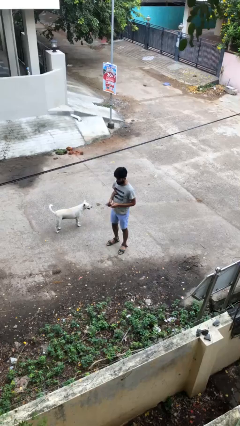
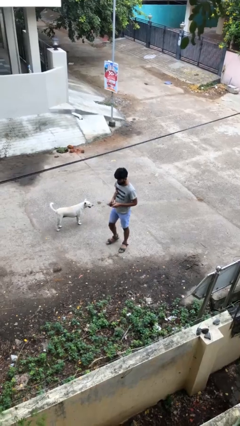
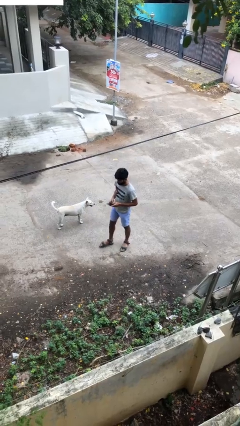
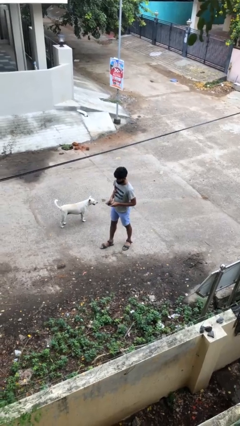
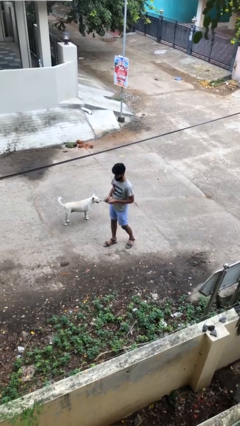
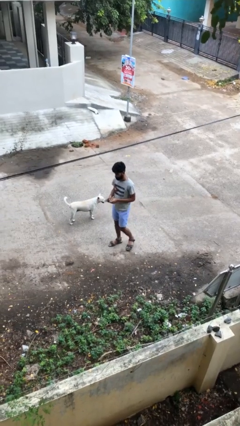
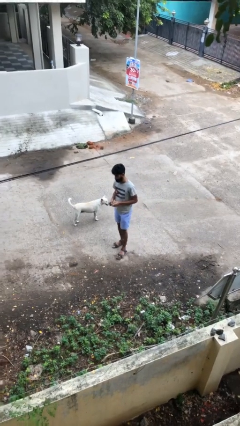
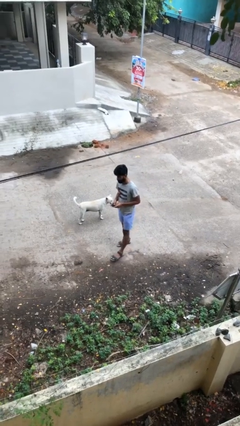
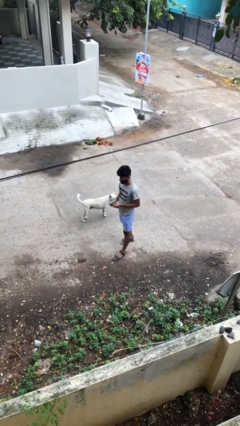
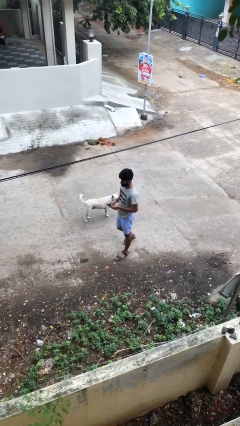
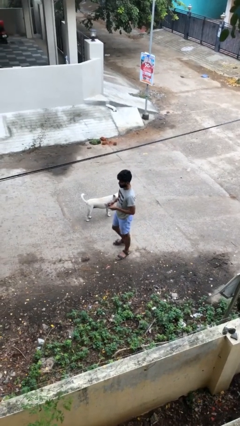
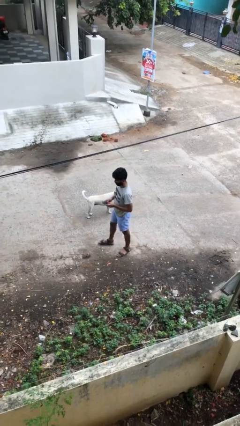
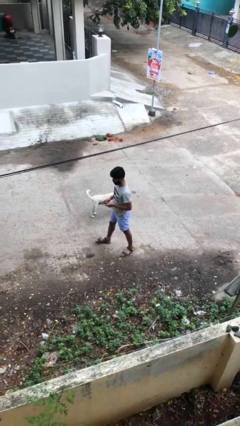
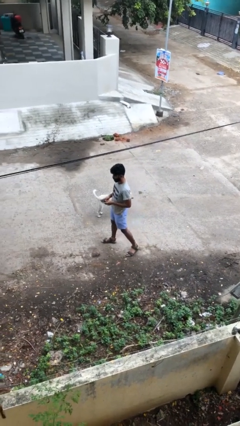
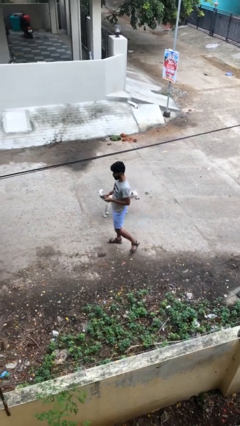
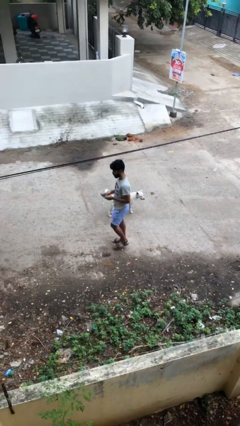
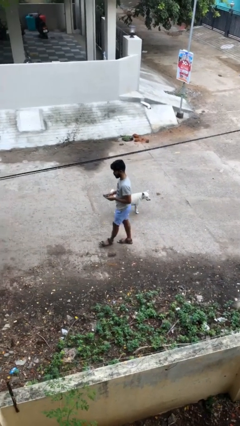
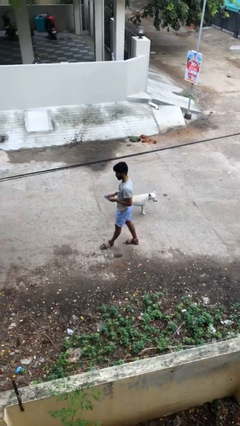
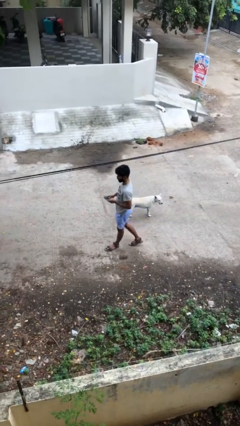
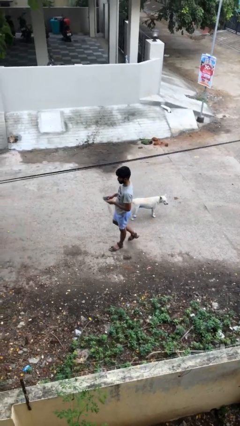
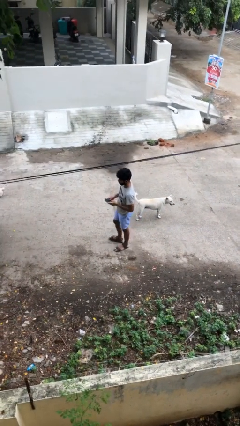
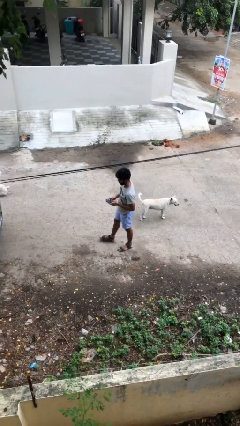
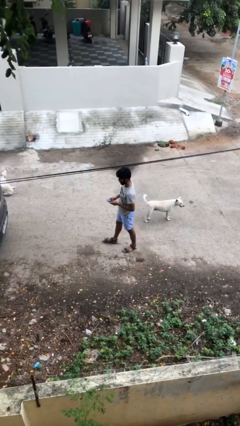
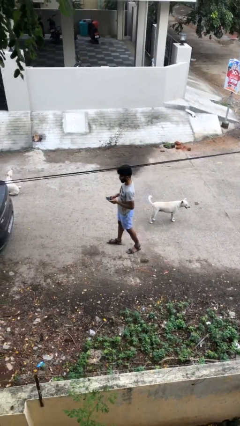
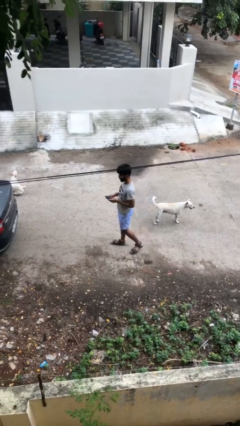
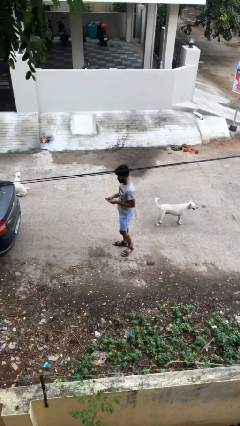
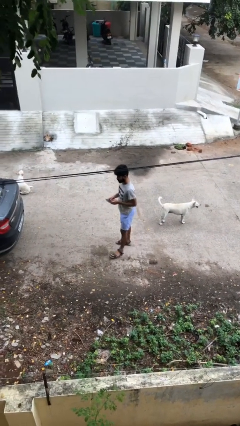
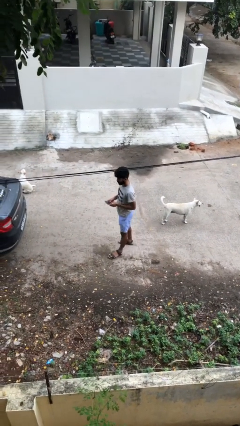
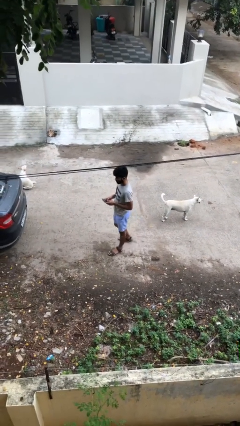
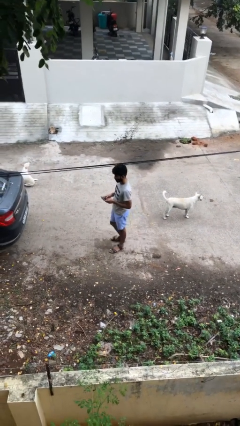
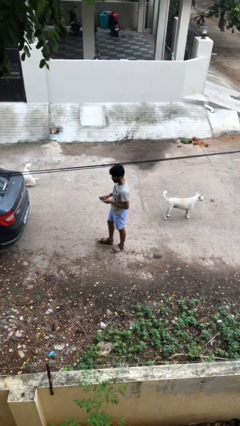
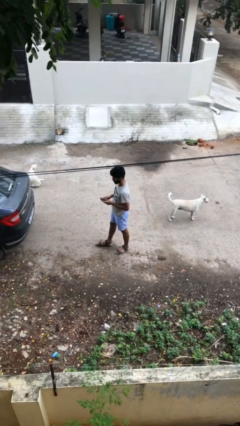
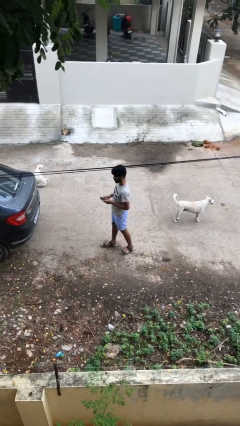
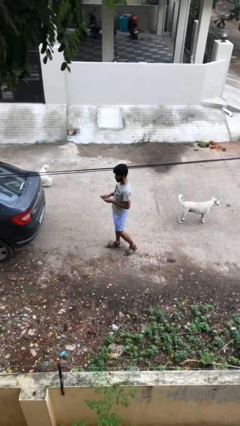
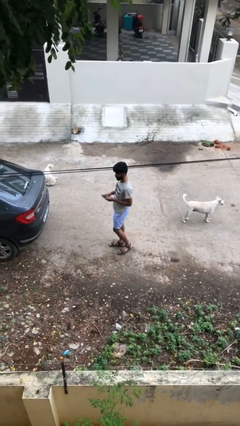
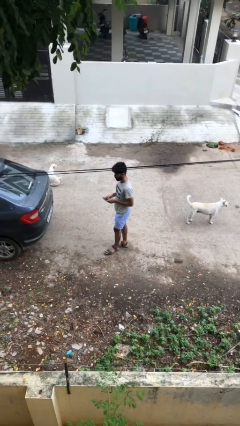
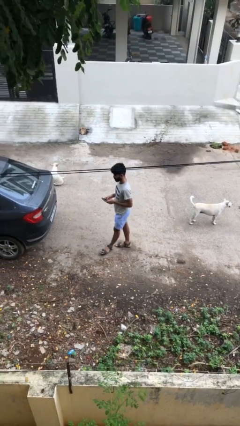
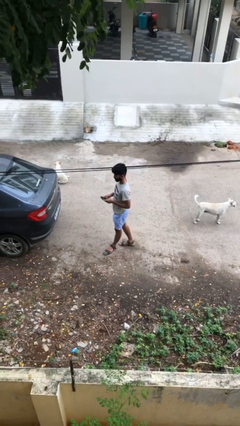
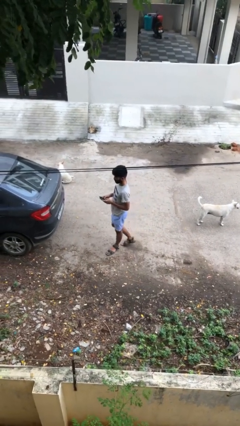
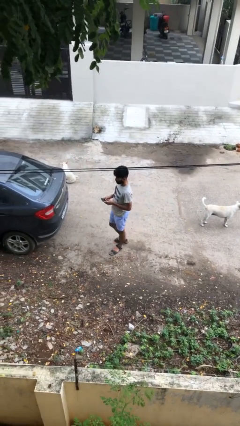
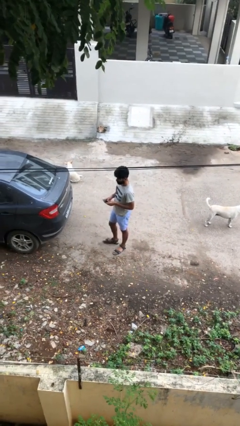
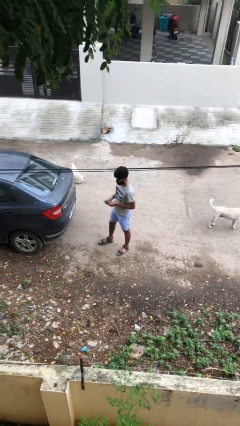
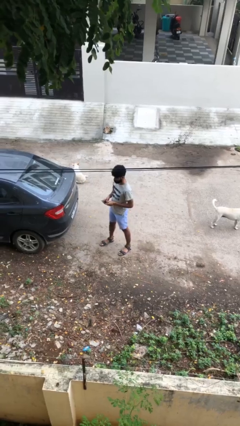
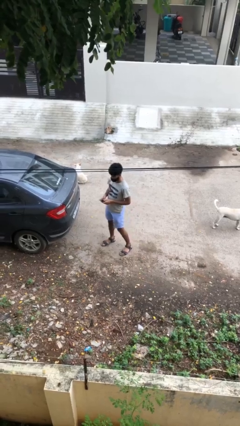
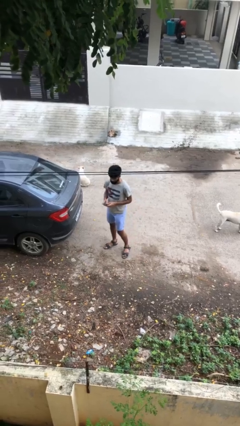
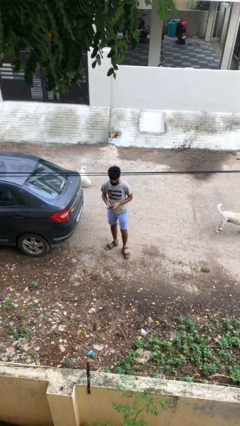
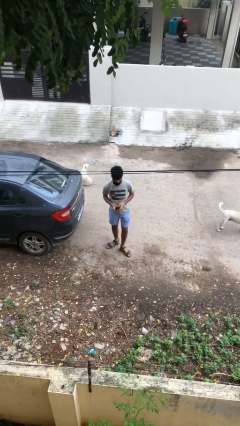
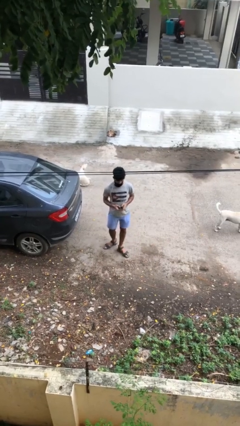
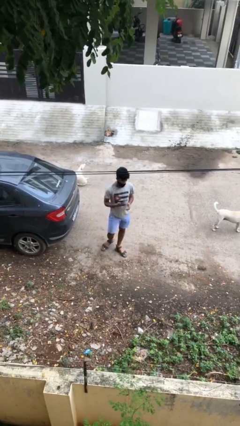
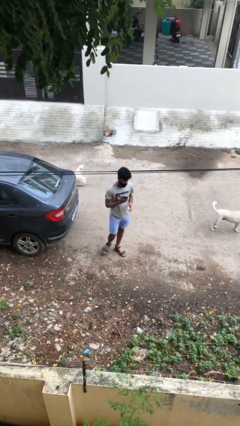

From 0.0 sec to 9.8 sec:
person texts on phone

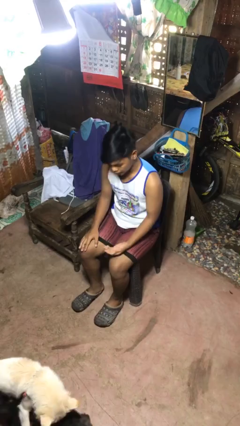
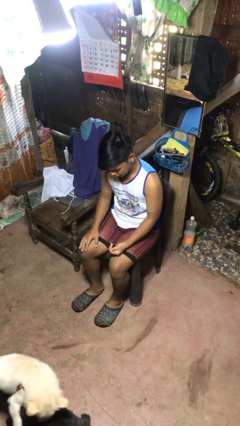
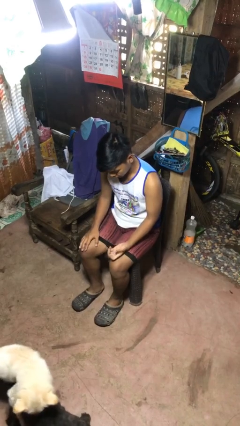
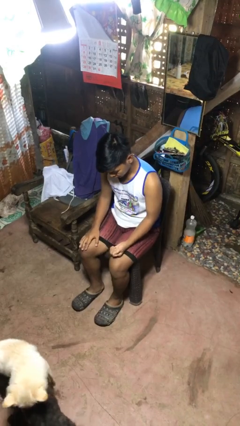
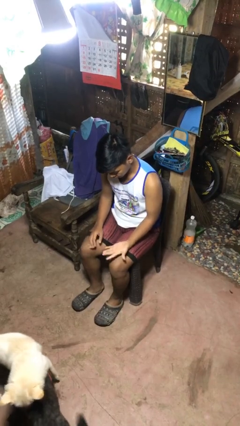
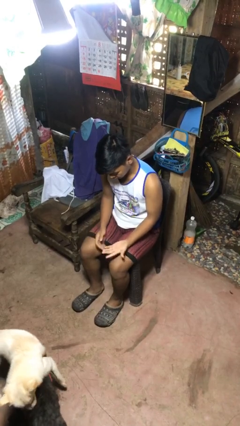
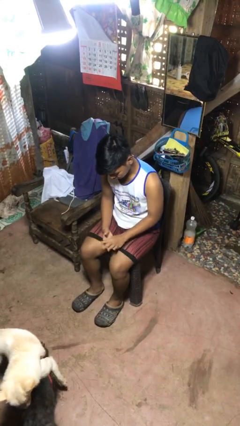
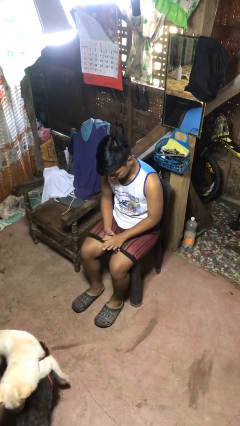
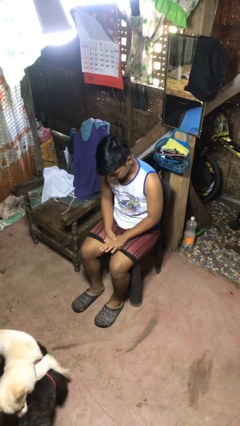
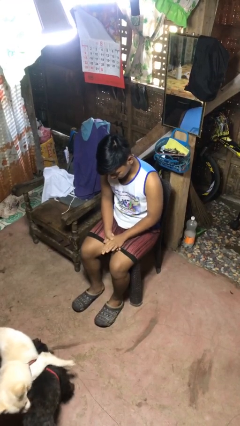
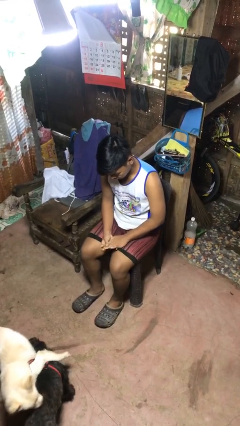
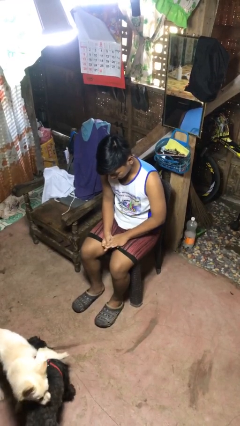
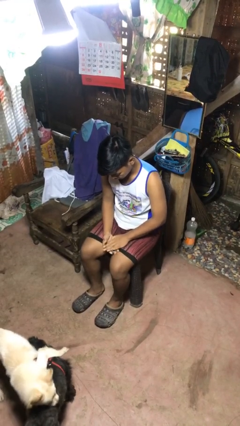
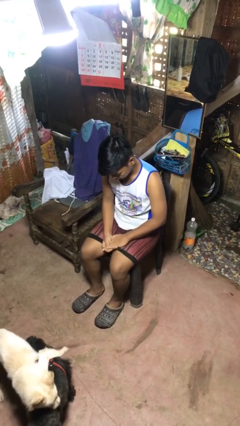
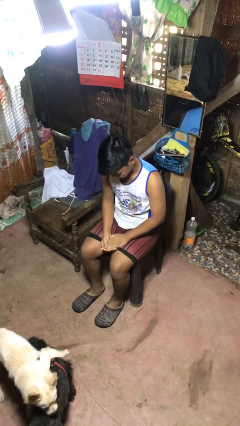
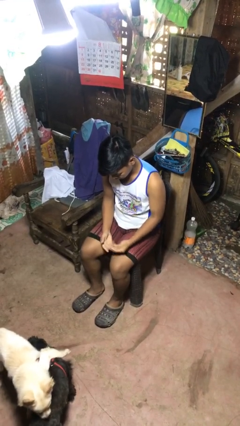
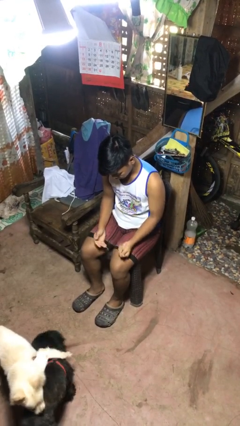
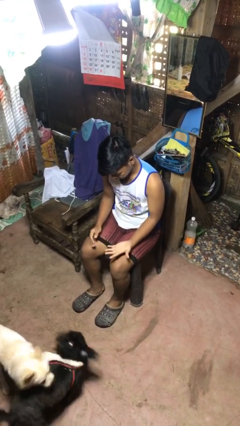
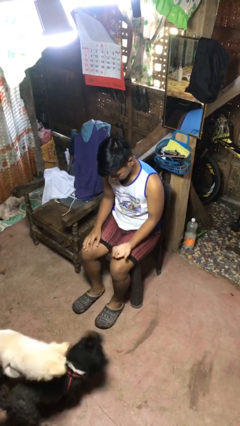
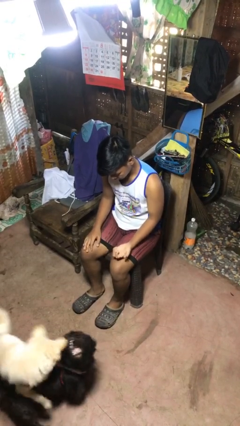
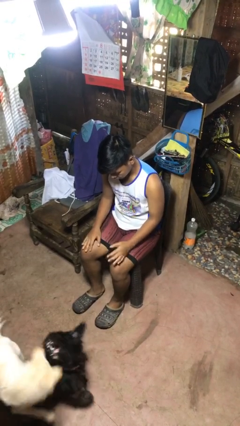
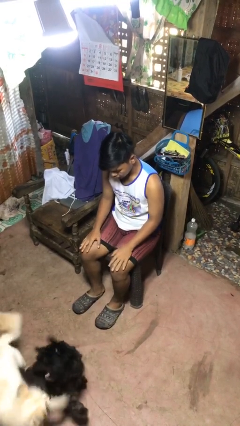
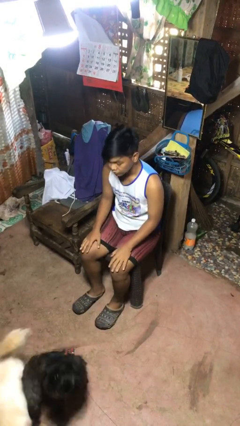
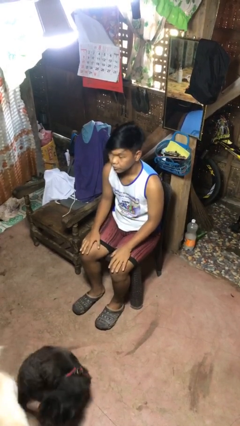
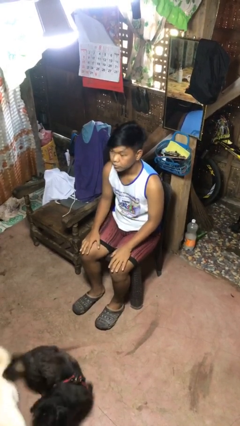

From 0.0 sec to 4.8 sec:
person looks at hands in lap

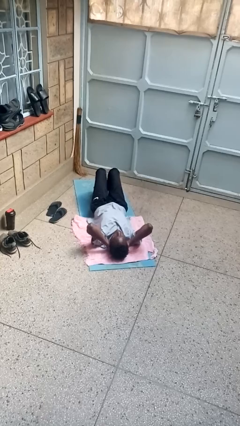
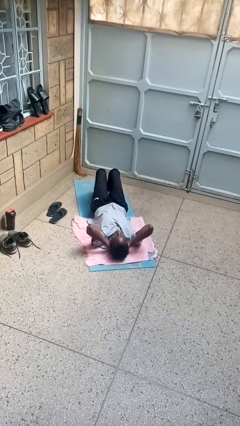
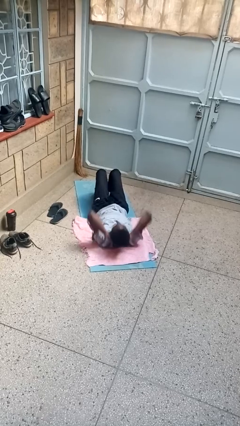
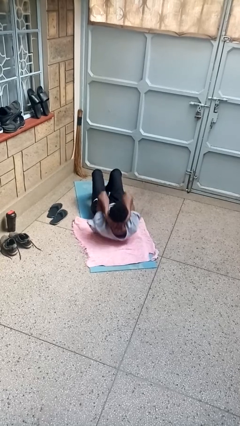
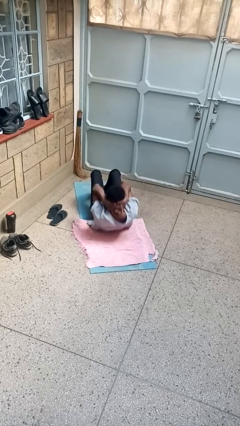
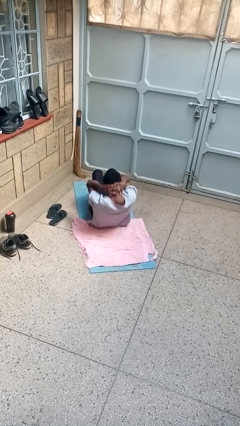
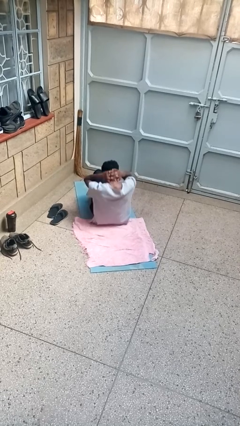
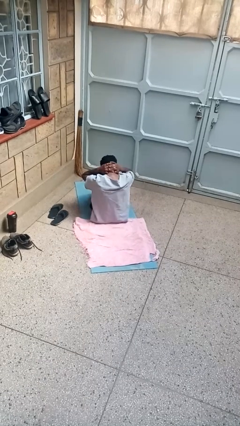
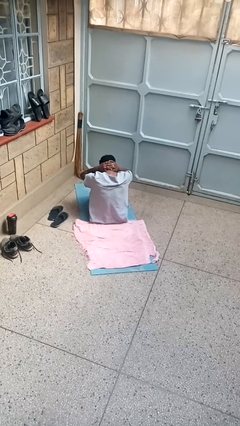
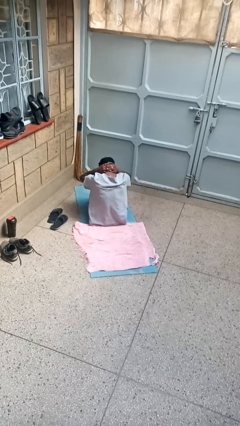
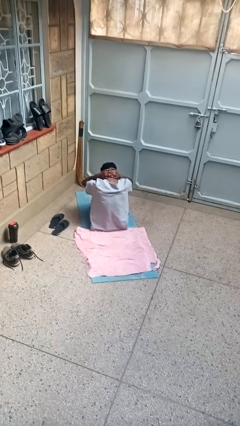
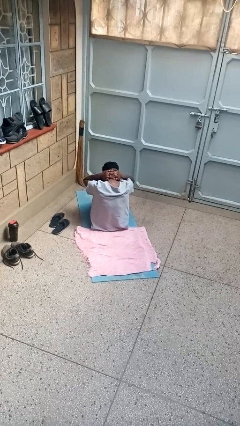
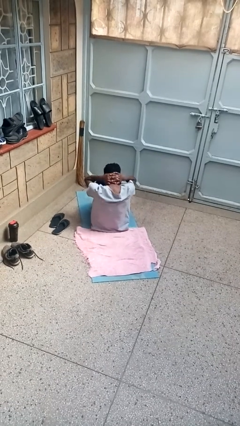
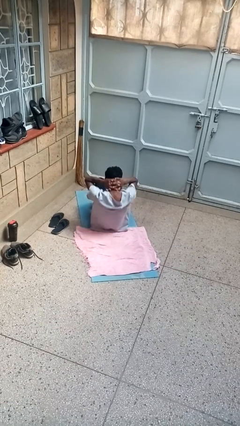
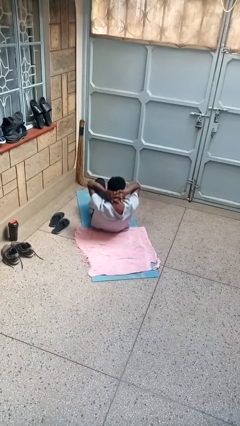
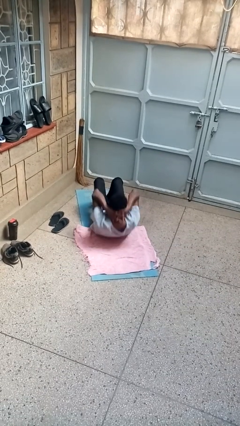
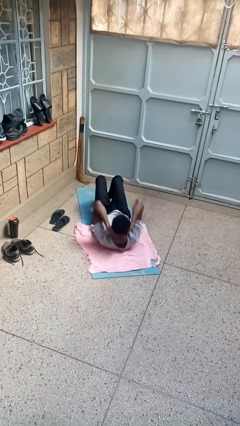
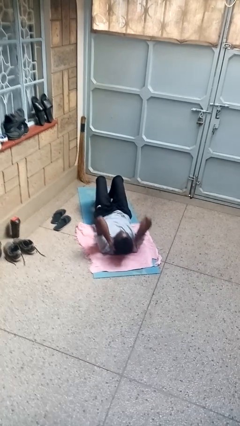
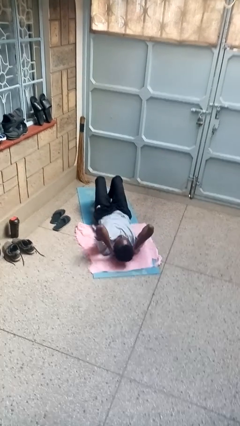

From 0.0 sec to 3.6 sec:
person exercises with situp
